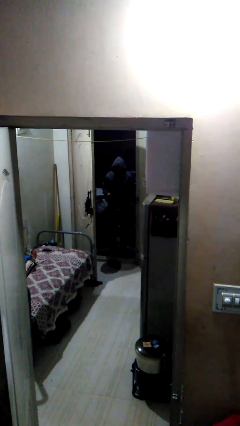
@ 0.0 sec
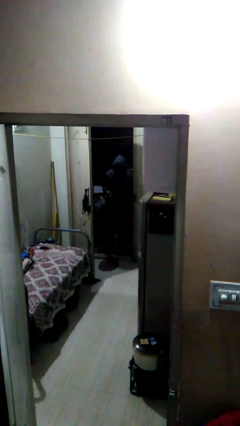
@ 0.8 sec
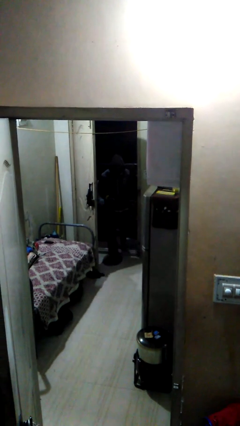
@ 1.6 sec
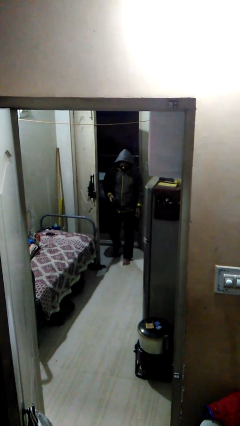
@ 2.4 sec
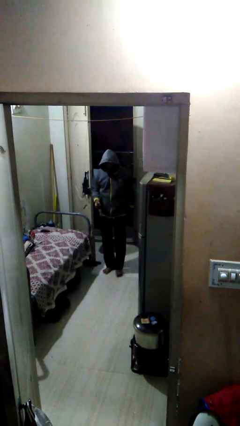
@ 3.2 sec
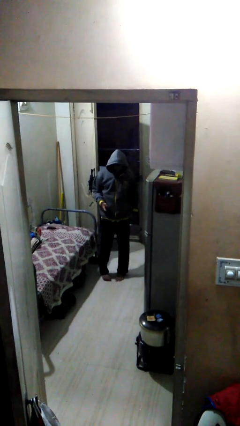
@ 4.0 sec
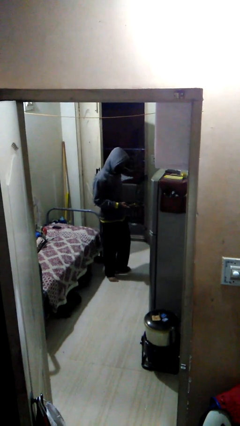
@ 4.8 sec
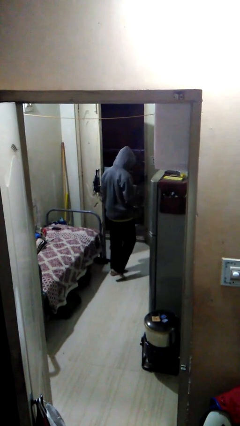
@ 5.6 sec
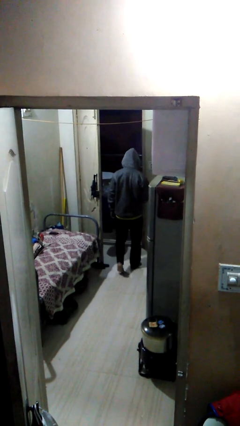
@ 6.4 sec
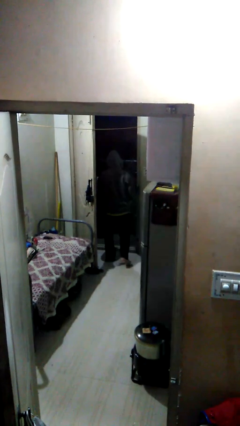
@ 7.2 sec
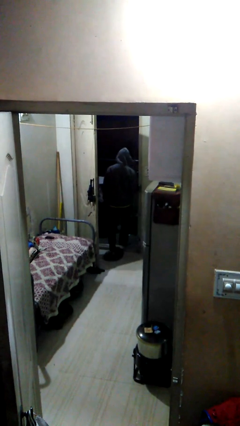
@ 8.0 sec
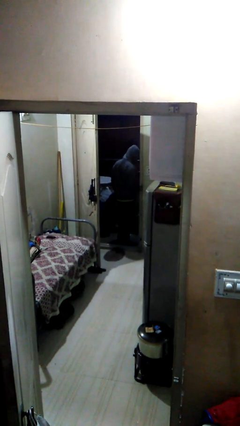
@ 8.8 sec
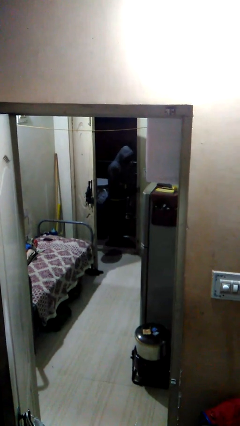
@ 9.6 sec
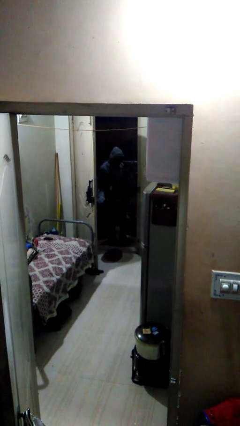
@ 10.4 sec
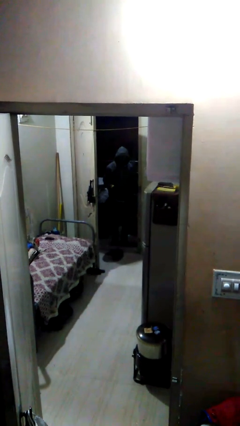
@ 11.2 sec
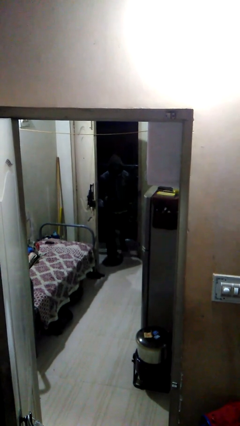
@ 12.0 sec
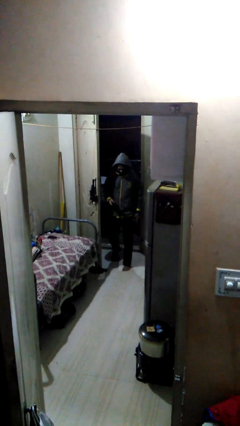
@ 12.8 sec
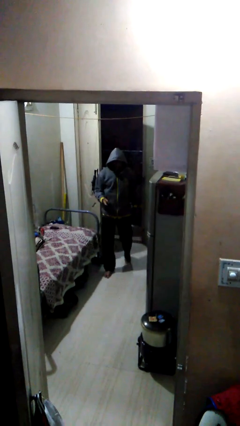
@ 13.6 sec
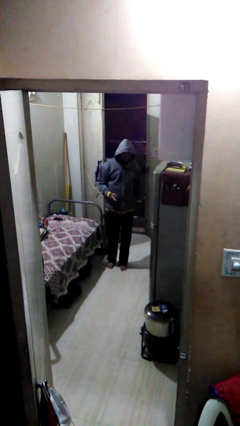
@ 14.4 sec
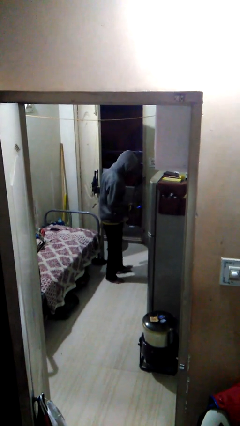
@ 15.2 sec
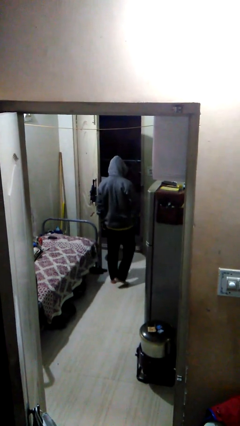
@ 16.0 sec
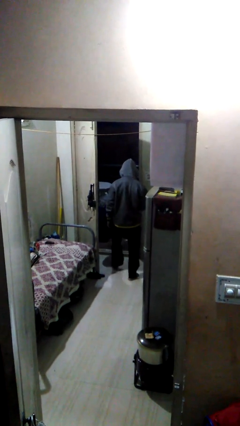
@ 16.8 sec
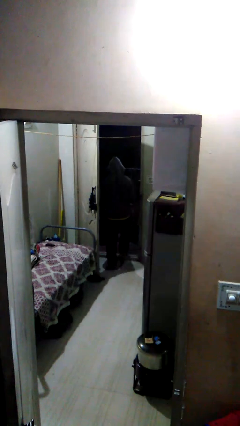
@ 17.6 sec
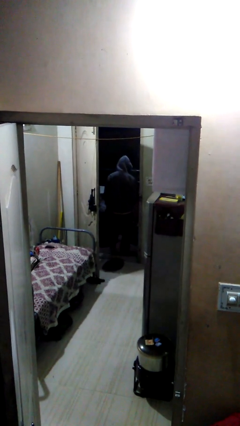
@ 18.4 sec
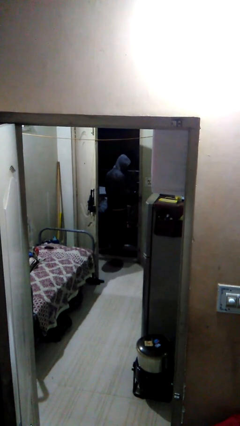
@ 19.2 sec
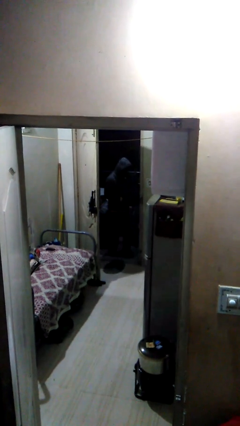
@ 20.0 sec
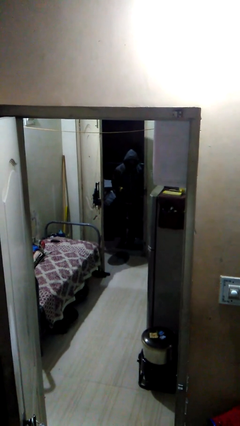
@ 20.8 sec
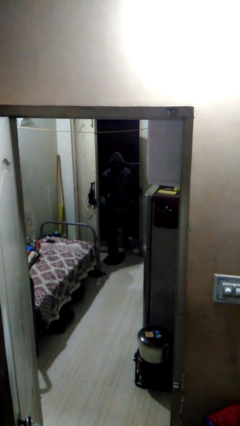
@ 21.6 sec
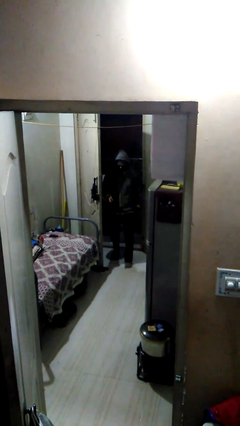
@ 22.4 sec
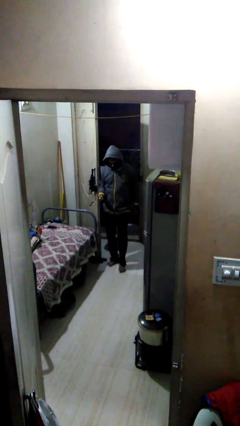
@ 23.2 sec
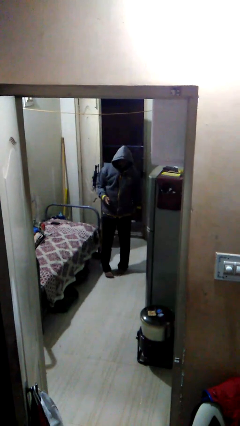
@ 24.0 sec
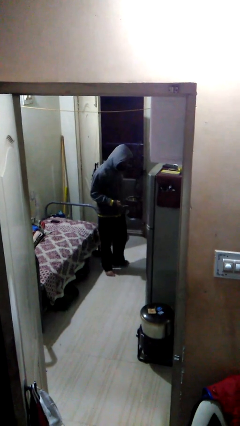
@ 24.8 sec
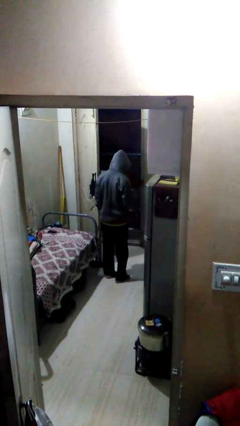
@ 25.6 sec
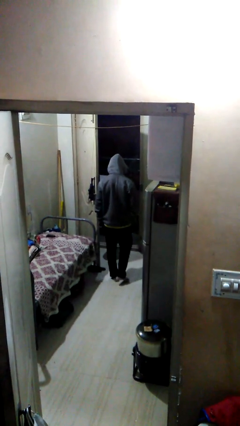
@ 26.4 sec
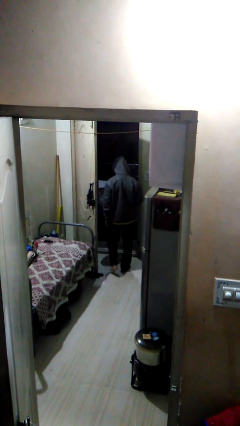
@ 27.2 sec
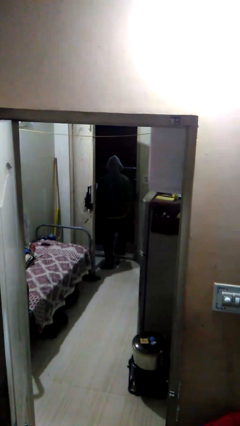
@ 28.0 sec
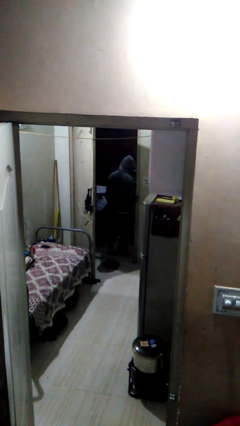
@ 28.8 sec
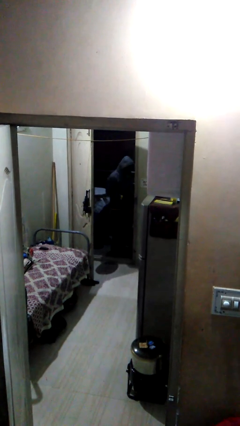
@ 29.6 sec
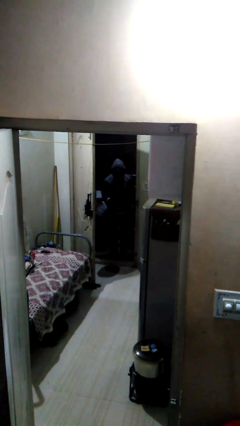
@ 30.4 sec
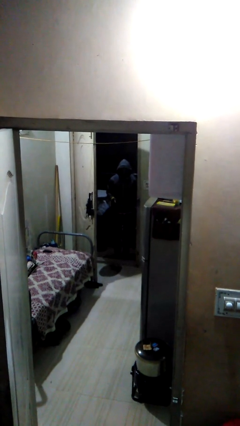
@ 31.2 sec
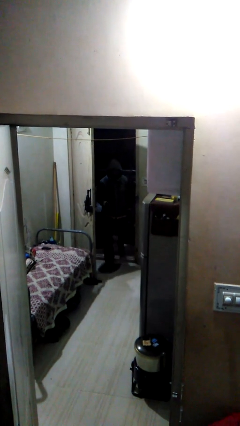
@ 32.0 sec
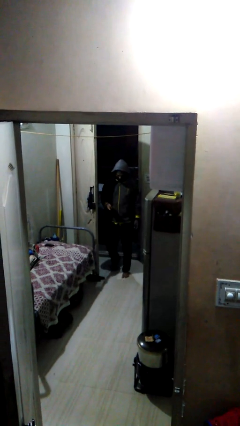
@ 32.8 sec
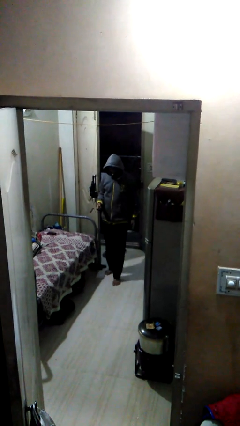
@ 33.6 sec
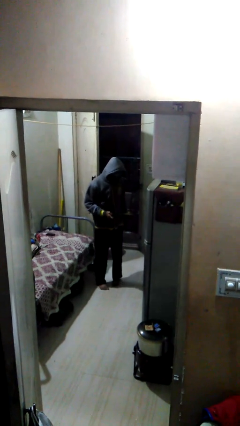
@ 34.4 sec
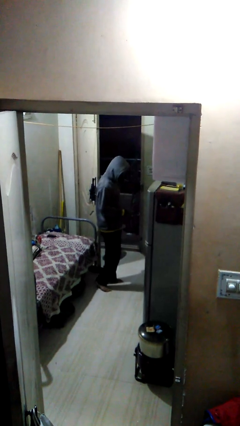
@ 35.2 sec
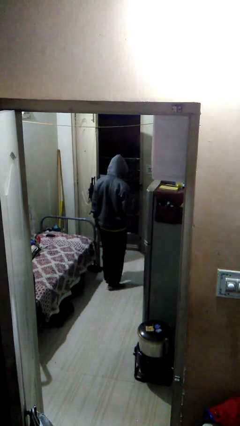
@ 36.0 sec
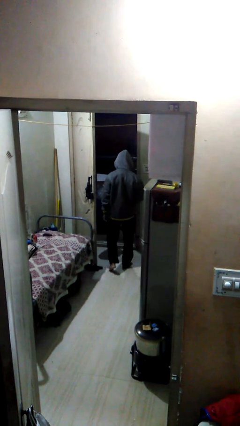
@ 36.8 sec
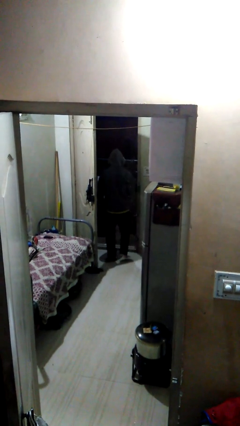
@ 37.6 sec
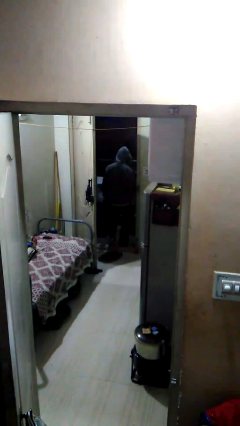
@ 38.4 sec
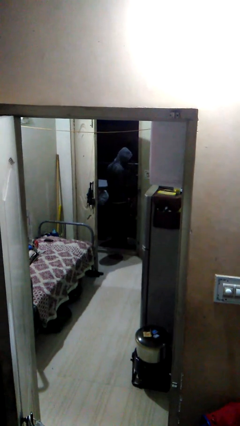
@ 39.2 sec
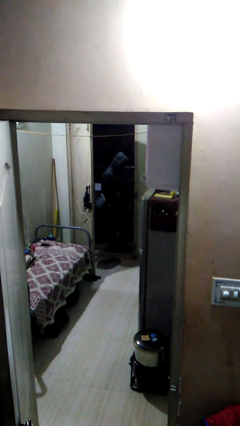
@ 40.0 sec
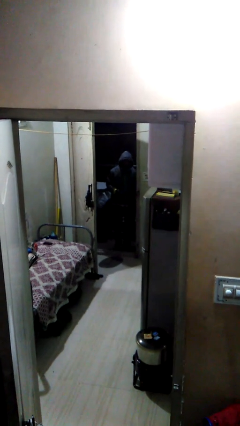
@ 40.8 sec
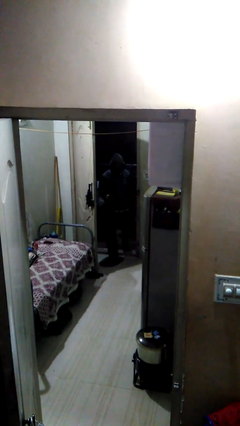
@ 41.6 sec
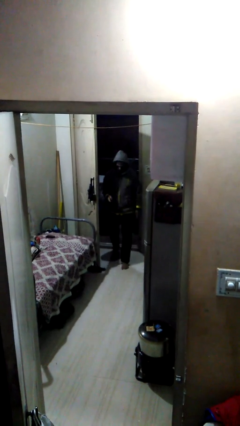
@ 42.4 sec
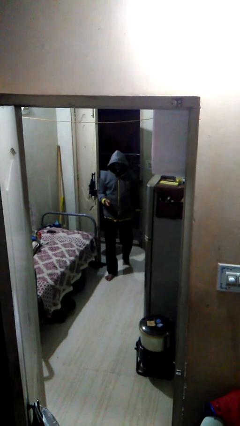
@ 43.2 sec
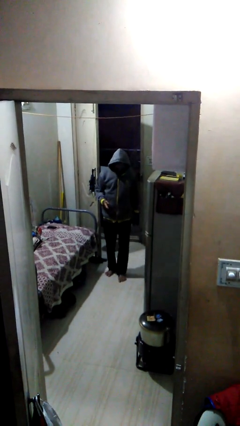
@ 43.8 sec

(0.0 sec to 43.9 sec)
person texts on phone

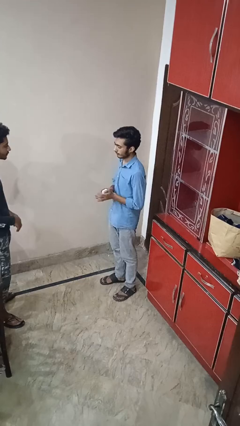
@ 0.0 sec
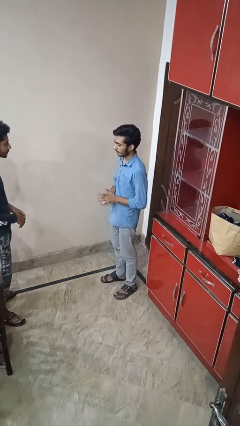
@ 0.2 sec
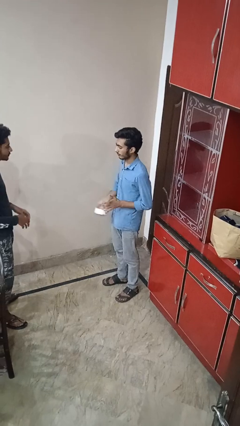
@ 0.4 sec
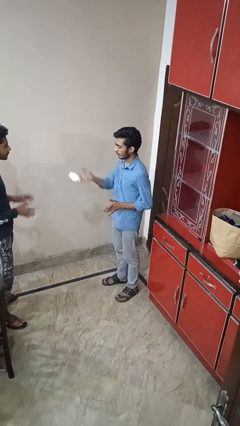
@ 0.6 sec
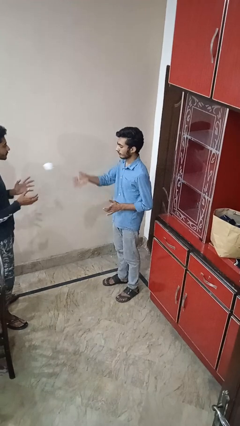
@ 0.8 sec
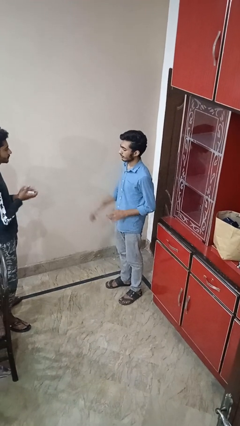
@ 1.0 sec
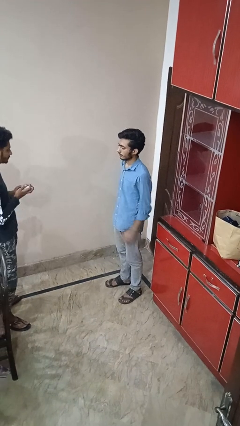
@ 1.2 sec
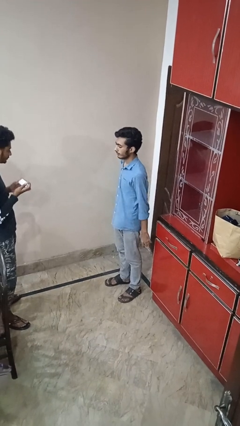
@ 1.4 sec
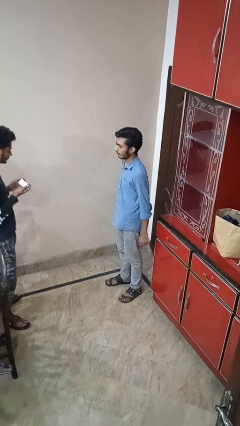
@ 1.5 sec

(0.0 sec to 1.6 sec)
person throws object to person

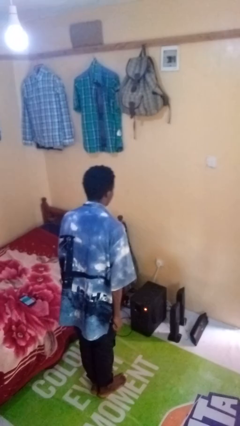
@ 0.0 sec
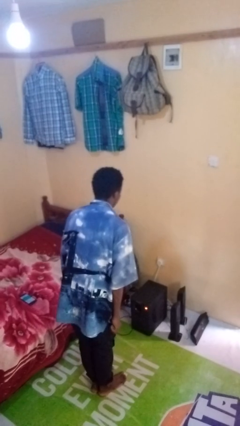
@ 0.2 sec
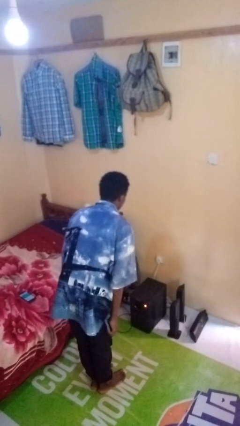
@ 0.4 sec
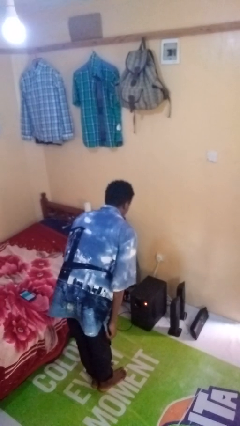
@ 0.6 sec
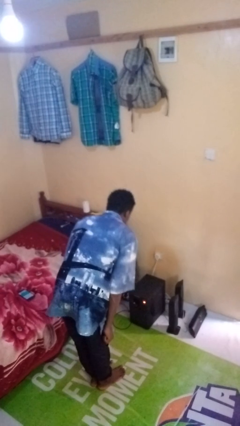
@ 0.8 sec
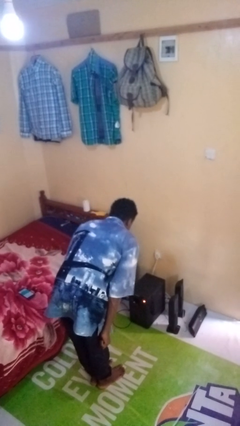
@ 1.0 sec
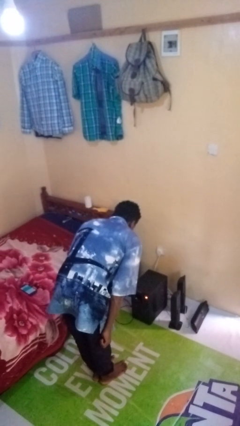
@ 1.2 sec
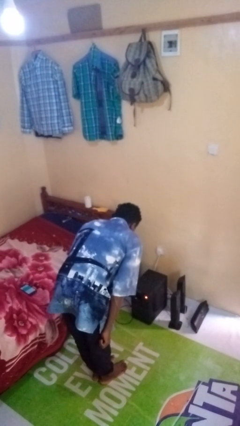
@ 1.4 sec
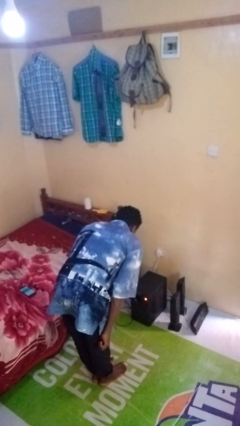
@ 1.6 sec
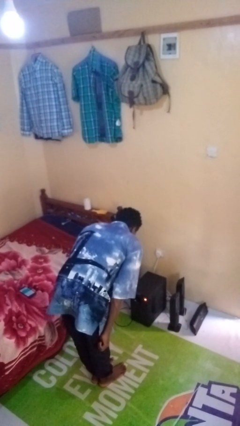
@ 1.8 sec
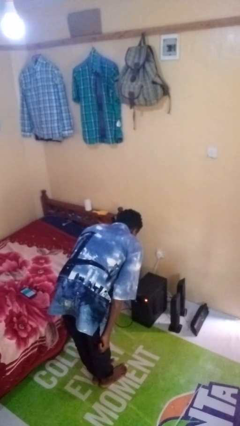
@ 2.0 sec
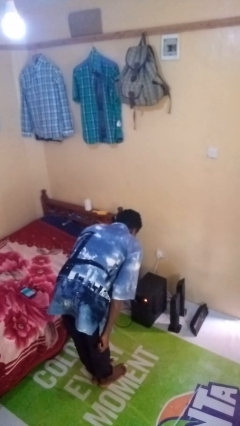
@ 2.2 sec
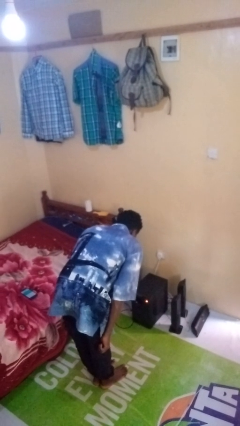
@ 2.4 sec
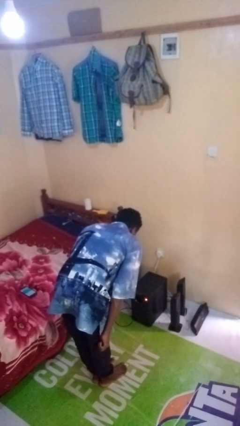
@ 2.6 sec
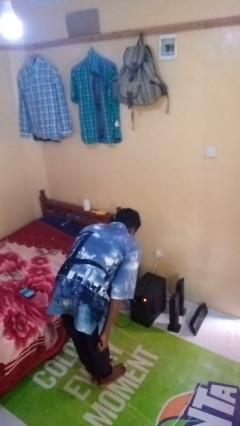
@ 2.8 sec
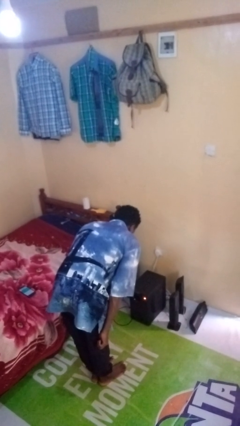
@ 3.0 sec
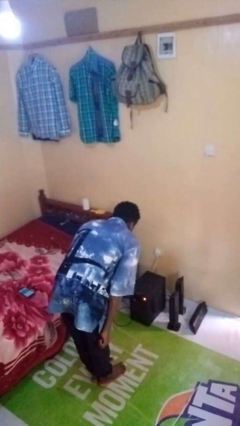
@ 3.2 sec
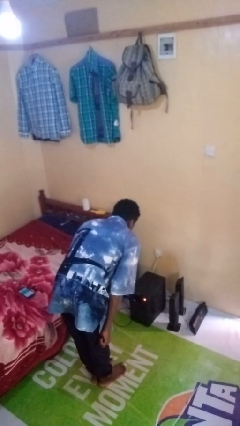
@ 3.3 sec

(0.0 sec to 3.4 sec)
person bows

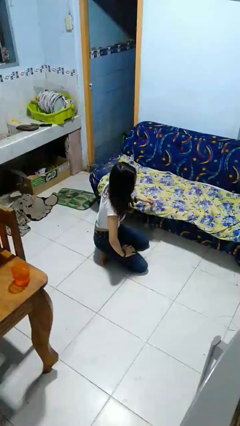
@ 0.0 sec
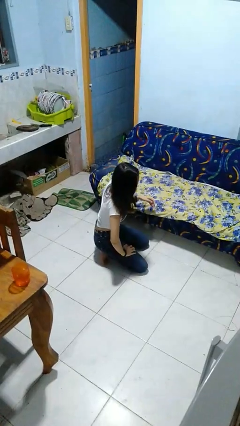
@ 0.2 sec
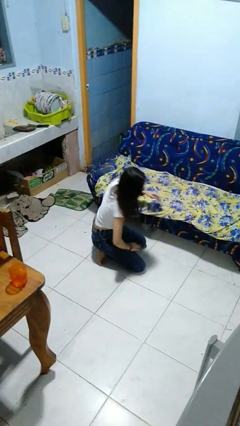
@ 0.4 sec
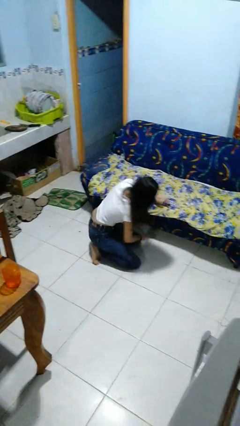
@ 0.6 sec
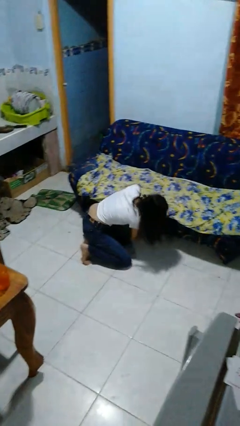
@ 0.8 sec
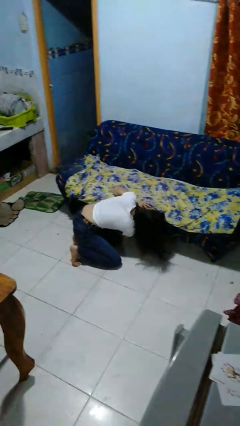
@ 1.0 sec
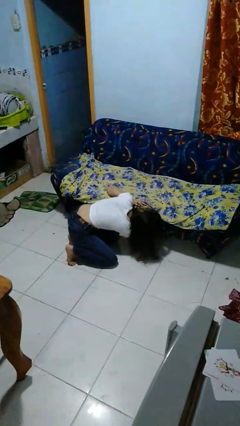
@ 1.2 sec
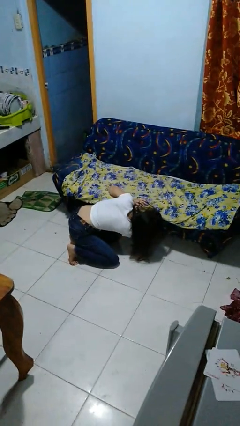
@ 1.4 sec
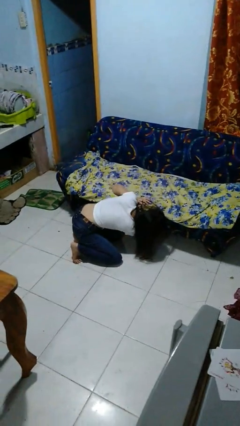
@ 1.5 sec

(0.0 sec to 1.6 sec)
person searches under couch
